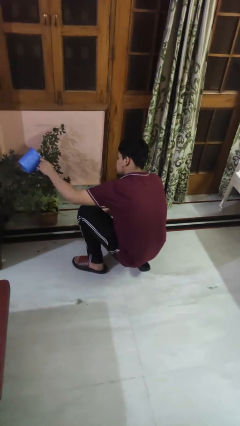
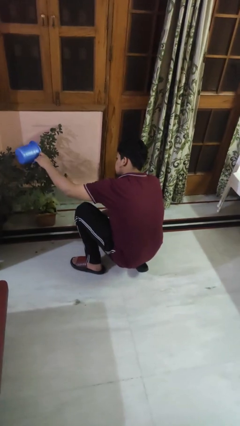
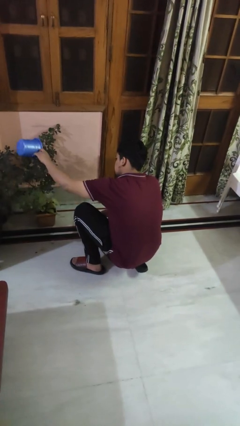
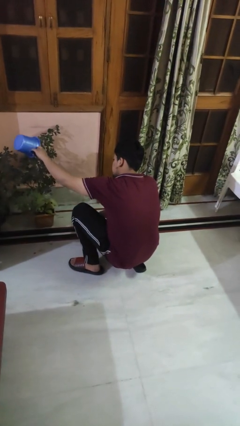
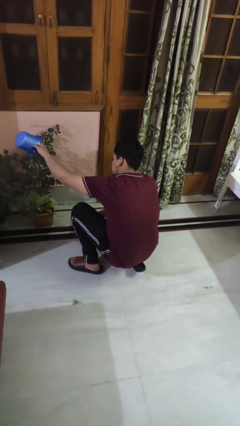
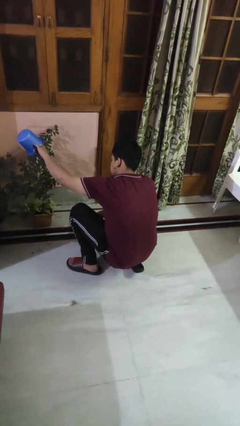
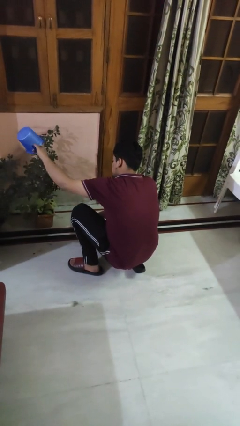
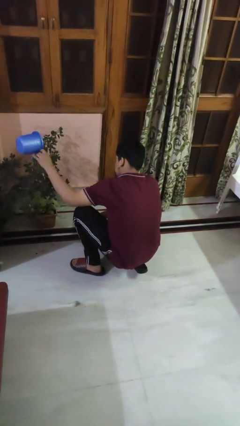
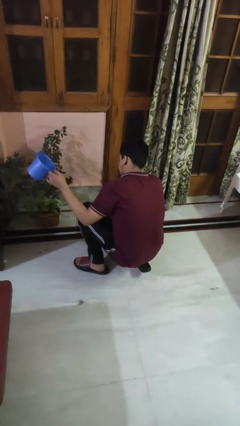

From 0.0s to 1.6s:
person waters houseplant

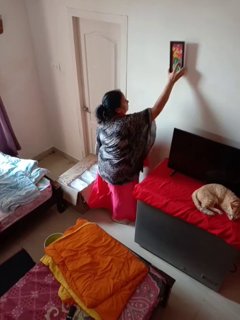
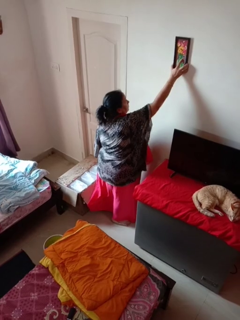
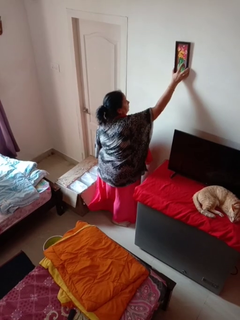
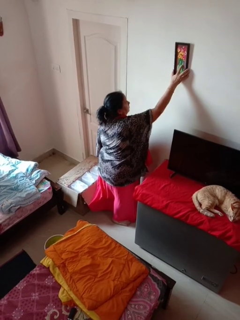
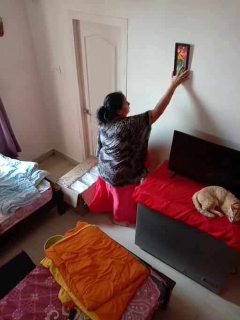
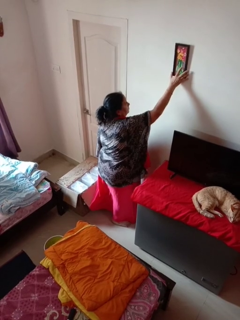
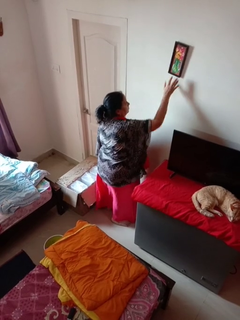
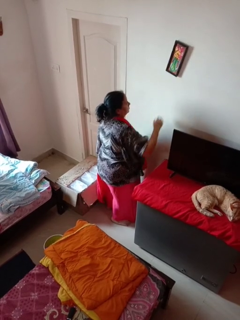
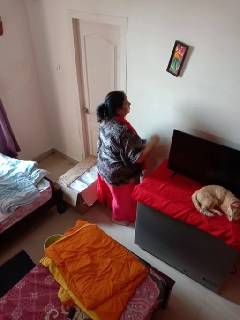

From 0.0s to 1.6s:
person puts up picture frame

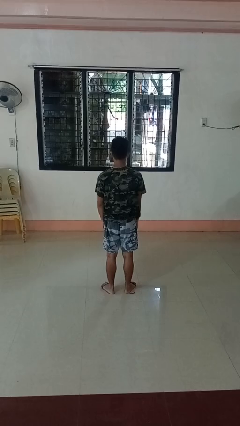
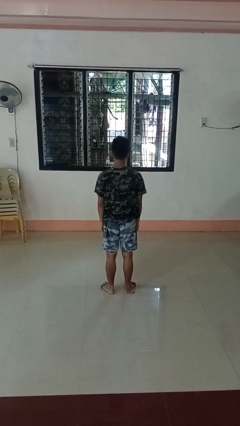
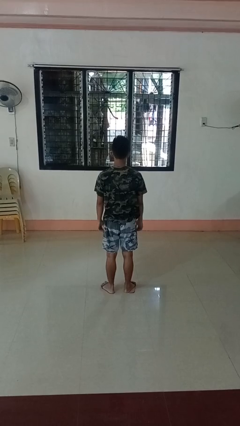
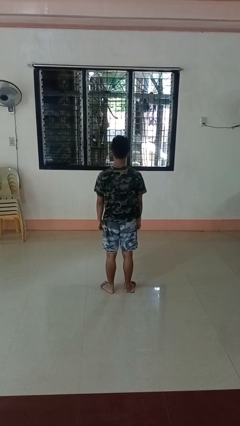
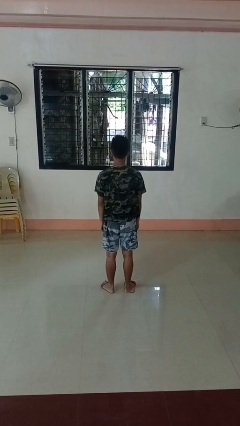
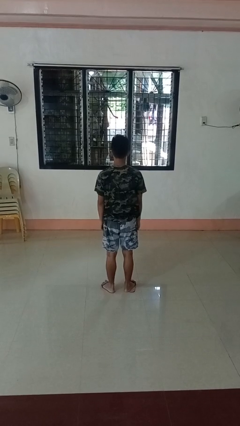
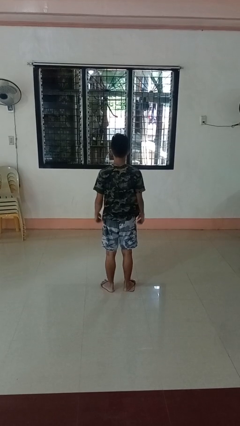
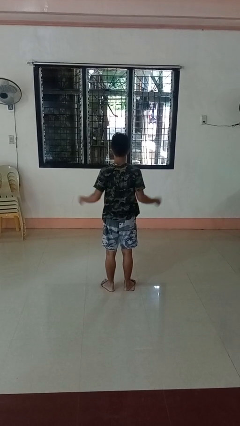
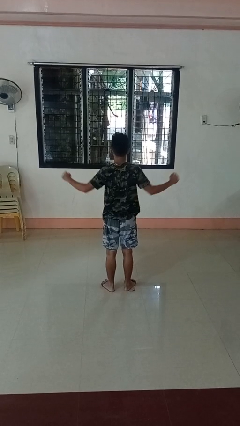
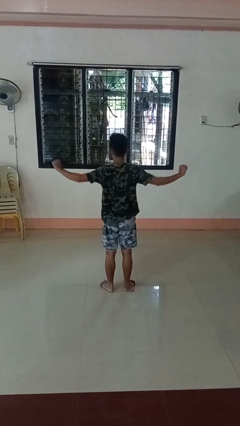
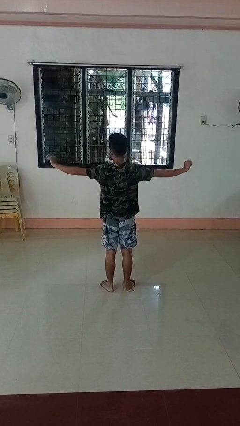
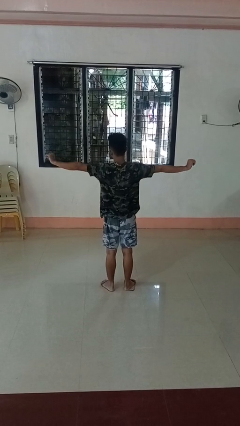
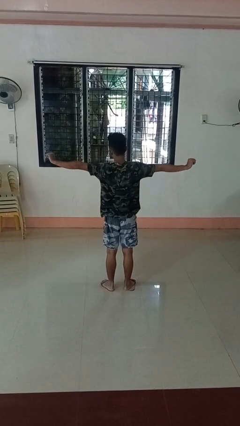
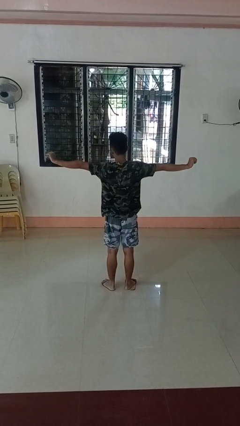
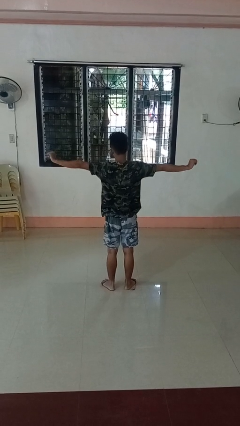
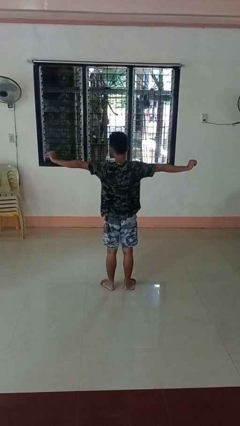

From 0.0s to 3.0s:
person stretches arms to side

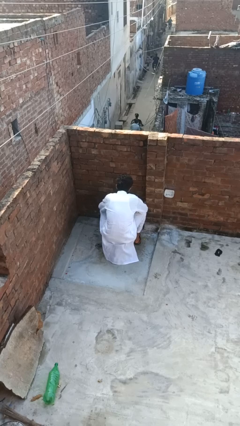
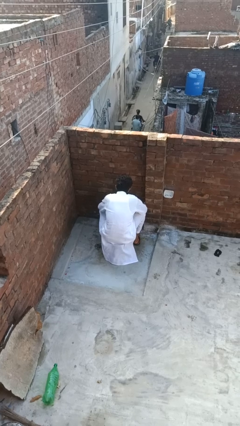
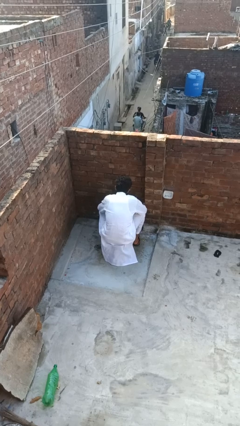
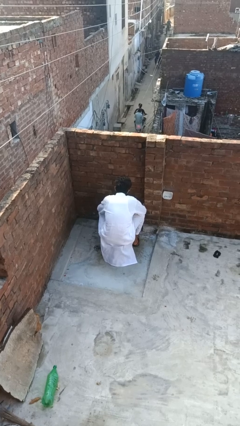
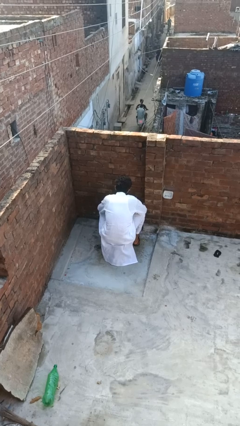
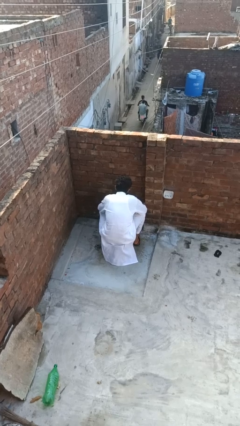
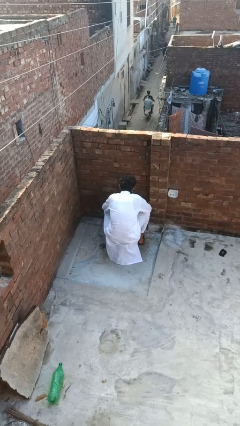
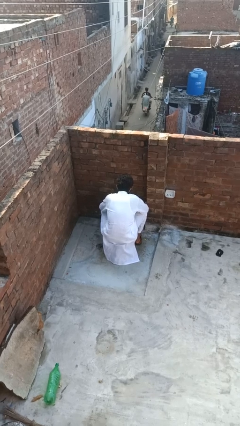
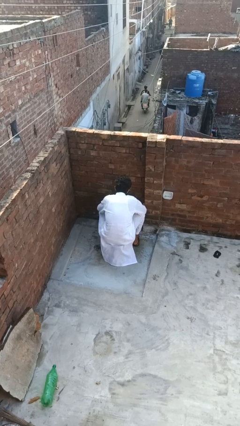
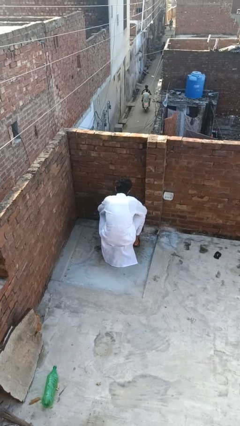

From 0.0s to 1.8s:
person turns off faucet

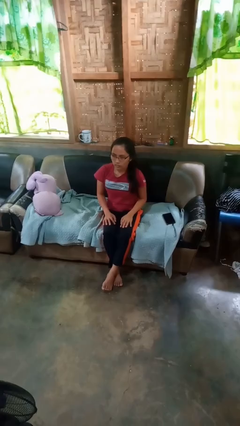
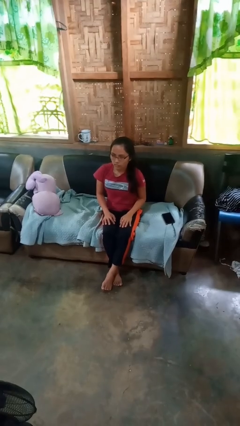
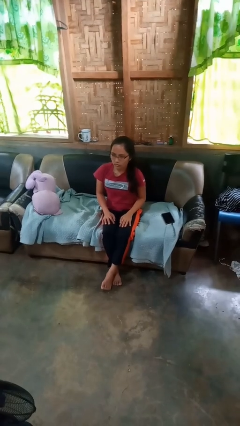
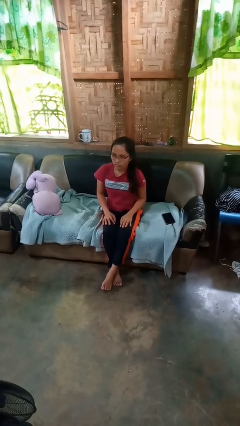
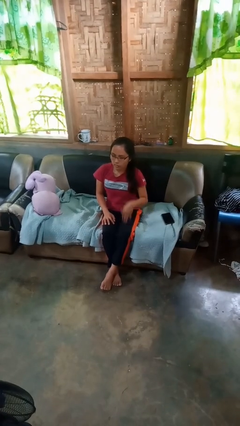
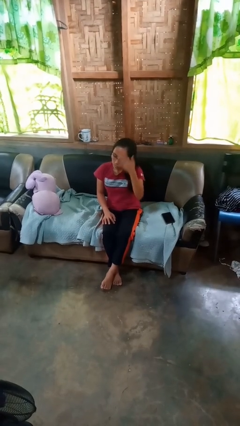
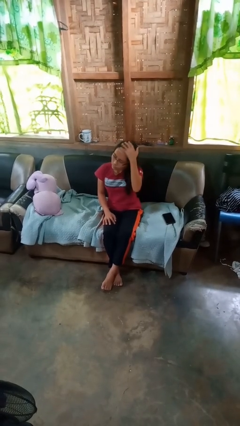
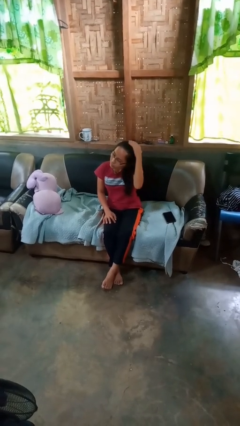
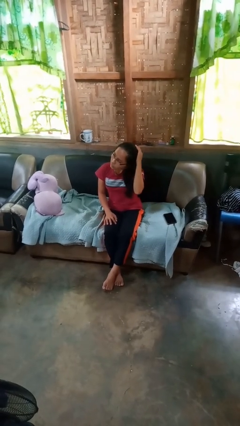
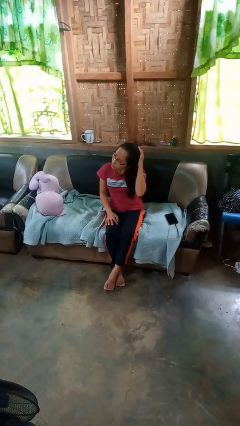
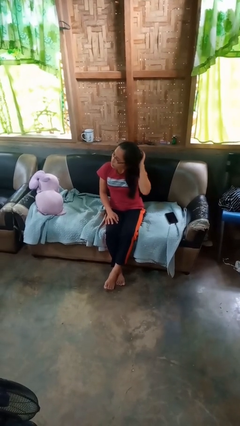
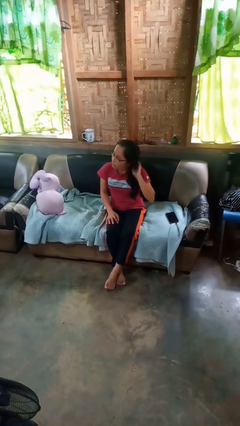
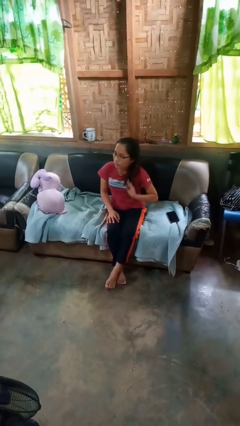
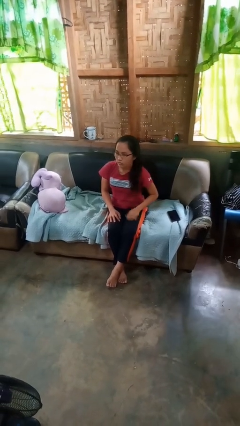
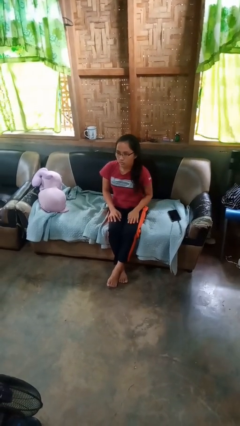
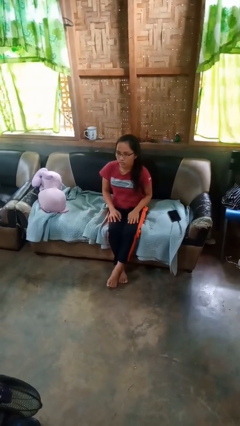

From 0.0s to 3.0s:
person strokes hair

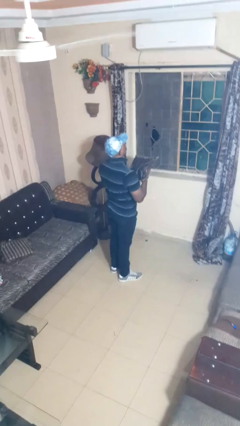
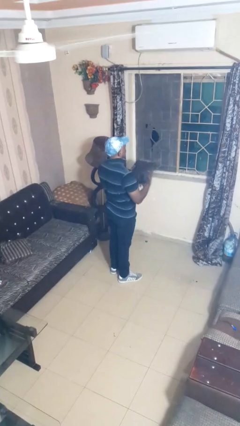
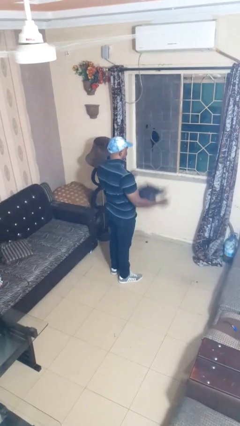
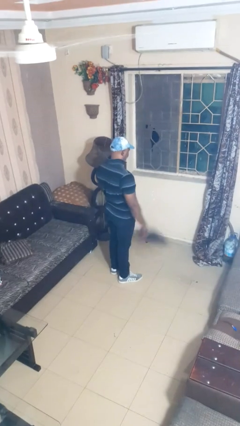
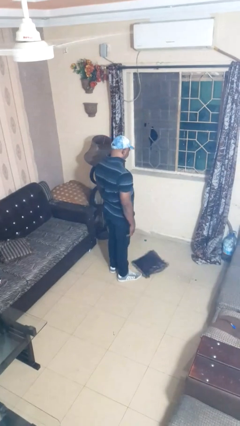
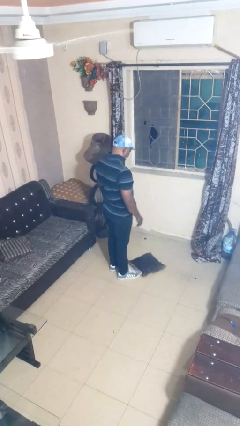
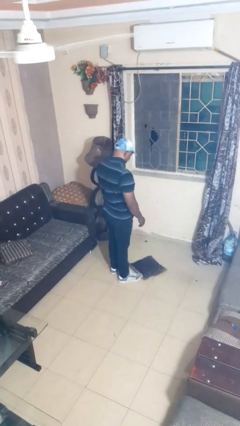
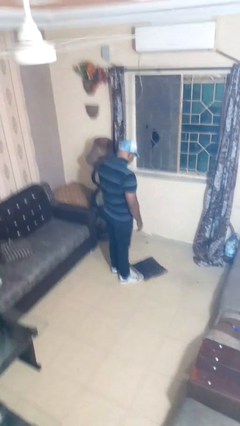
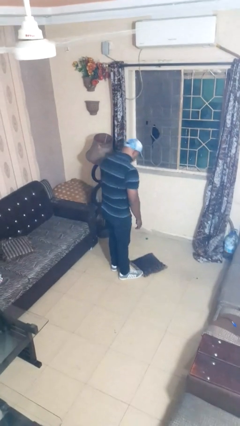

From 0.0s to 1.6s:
person catches dropped object

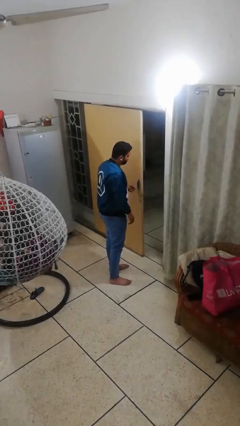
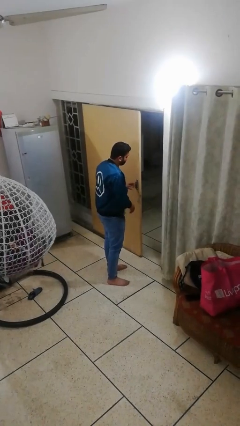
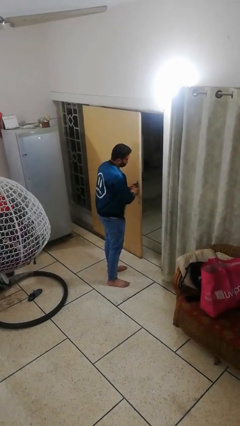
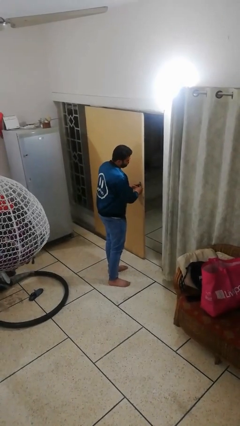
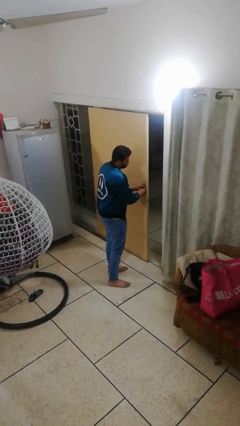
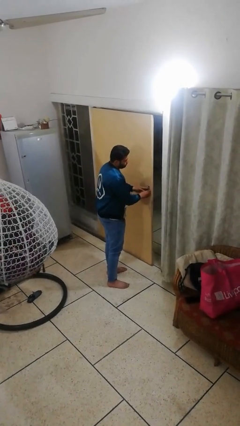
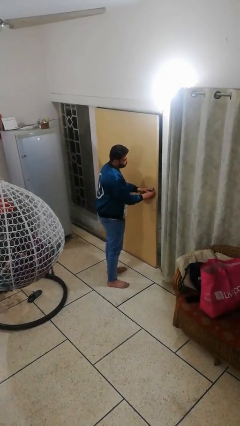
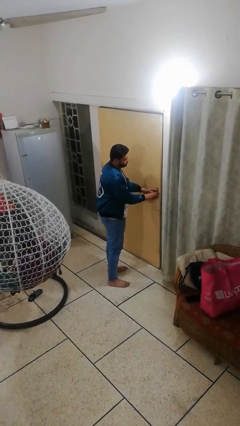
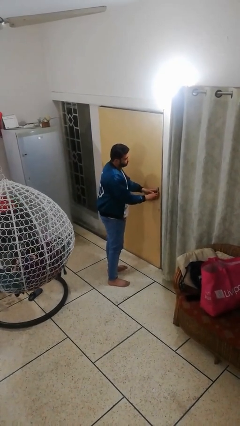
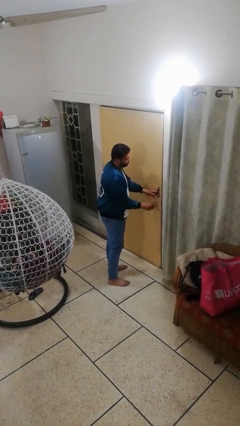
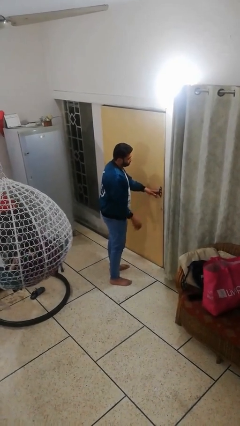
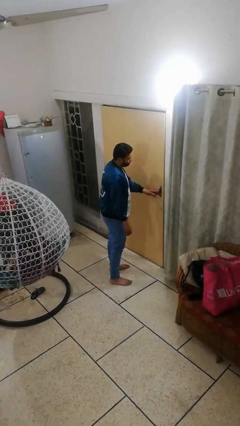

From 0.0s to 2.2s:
person closes facility door

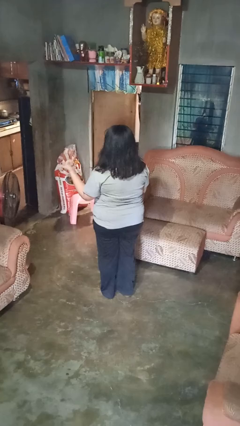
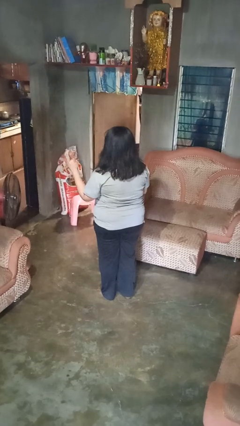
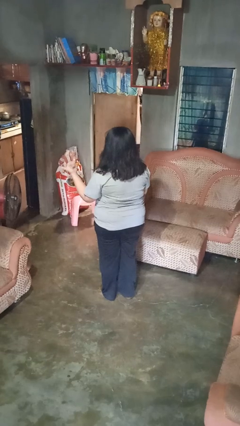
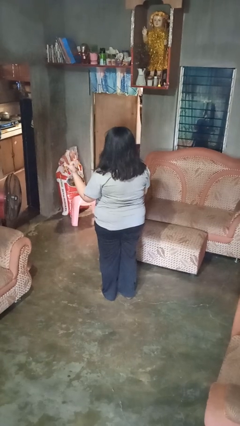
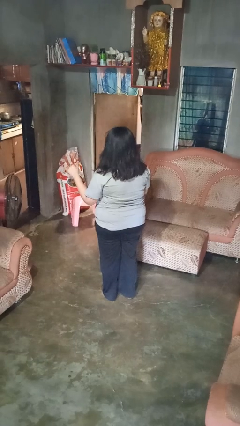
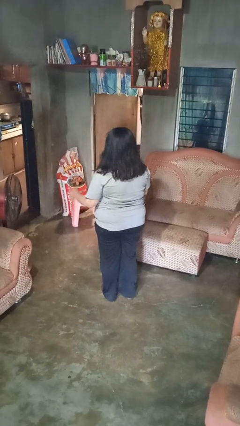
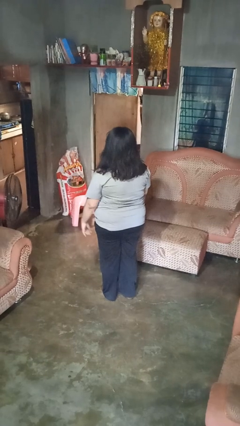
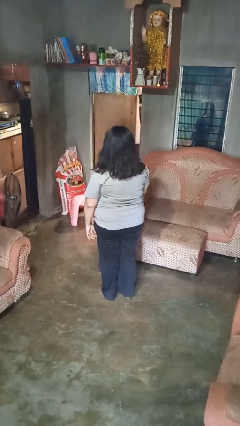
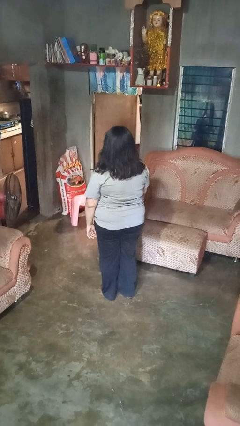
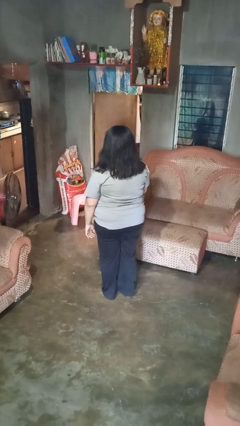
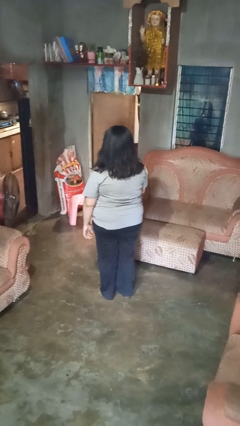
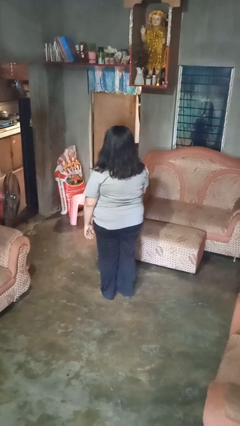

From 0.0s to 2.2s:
person gestures hang loose

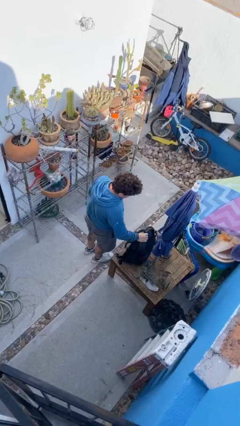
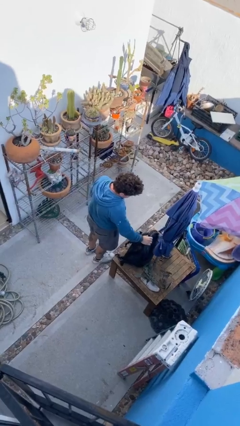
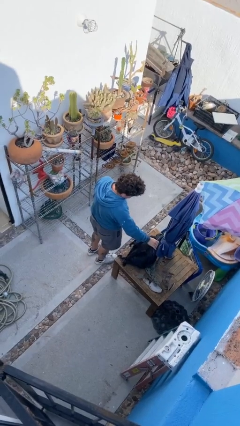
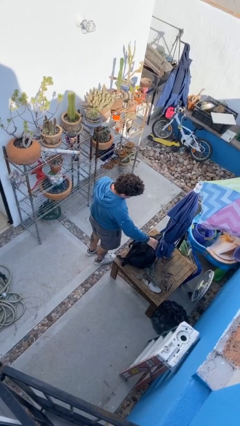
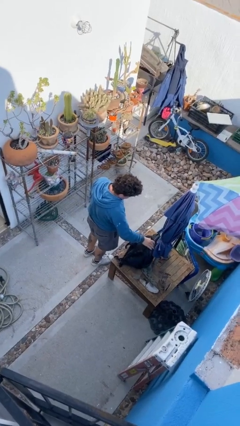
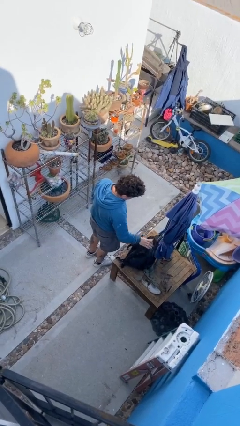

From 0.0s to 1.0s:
person puts down object on table
